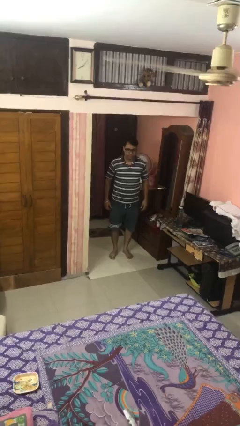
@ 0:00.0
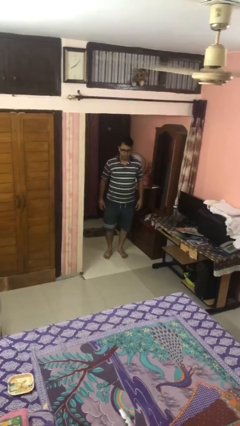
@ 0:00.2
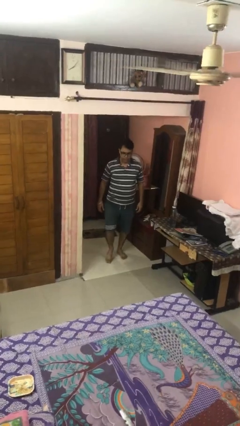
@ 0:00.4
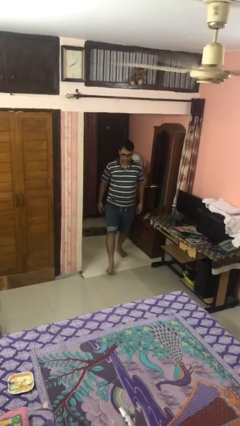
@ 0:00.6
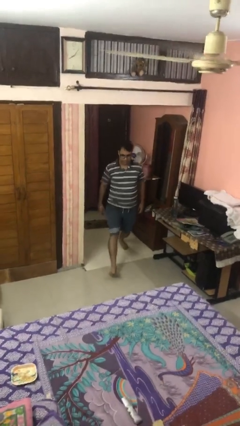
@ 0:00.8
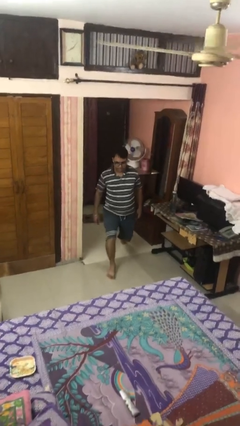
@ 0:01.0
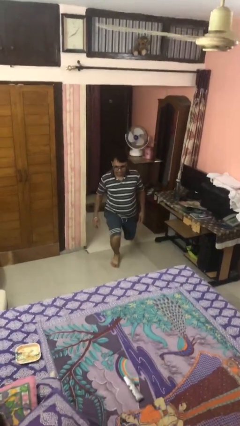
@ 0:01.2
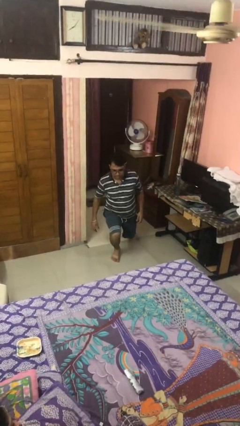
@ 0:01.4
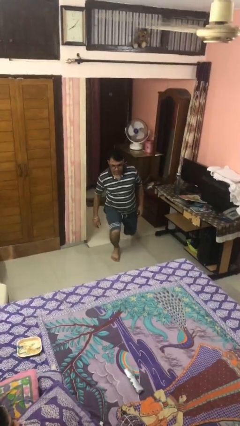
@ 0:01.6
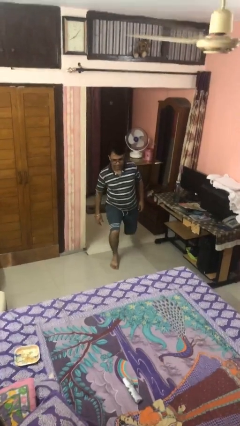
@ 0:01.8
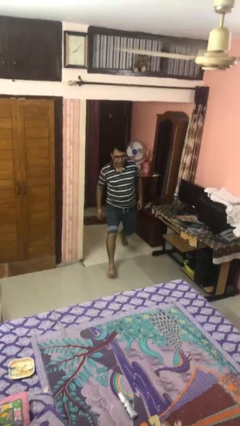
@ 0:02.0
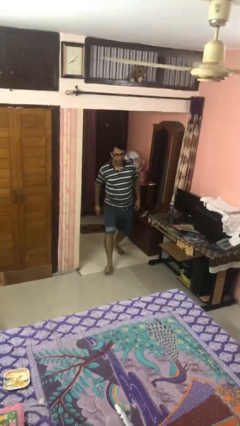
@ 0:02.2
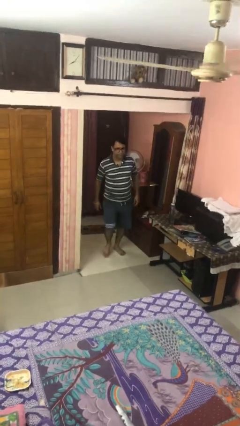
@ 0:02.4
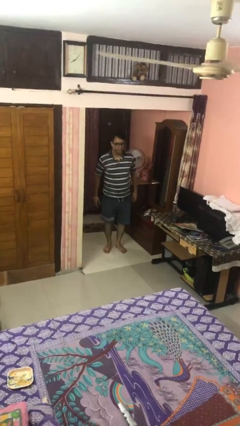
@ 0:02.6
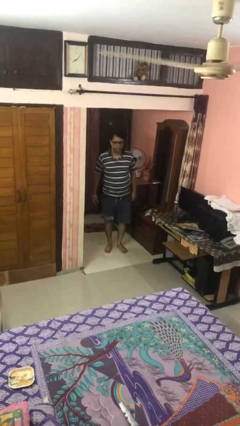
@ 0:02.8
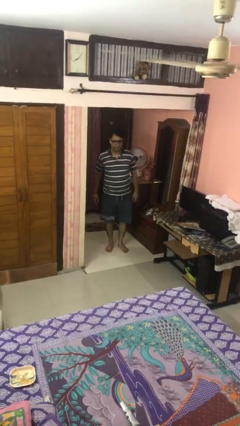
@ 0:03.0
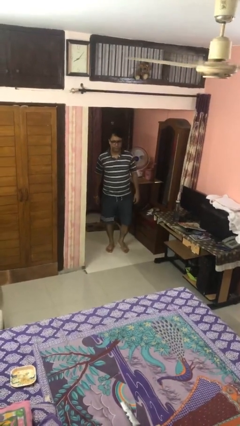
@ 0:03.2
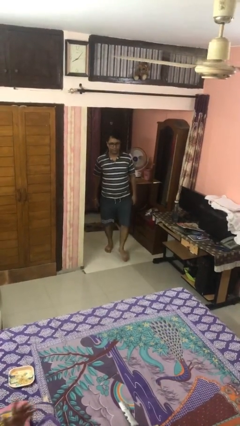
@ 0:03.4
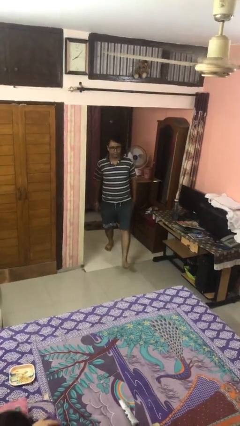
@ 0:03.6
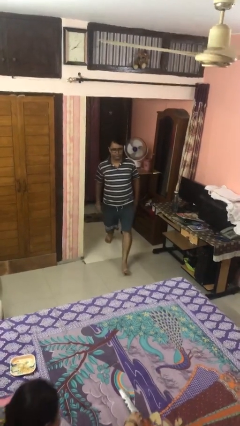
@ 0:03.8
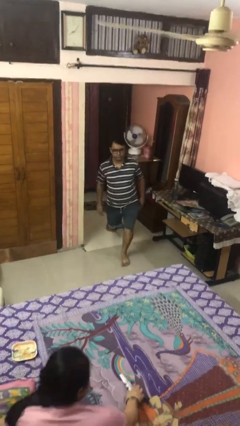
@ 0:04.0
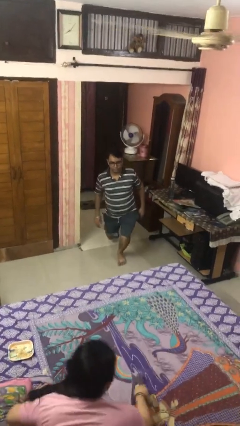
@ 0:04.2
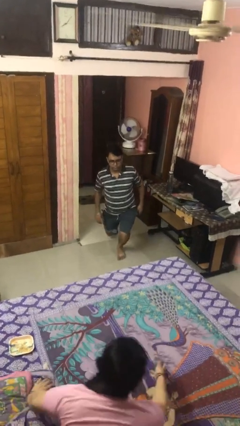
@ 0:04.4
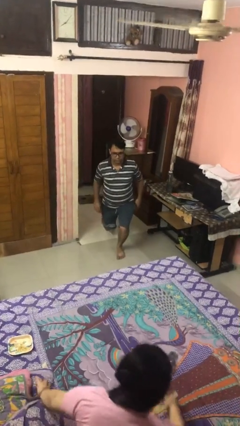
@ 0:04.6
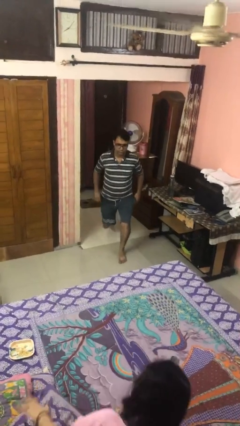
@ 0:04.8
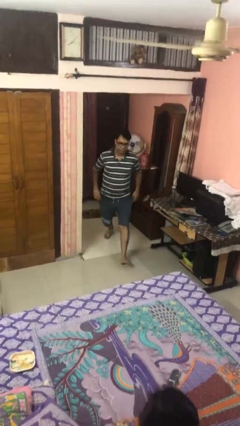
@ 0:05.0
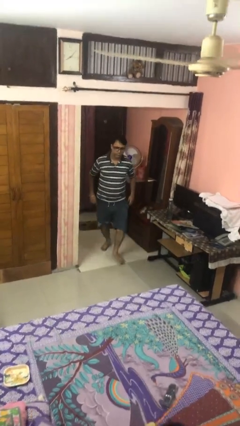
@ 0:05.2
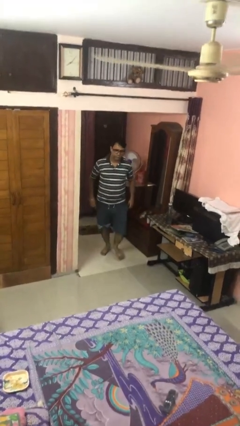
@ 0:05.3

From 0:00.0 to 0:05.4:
person exercises with lunges

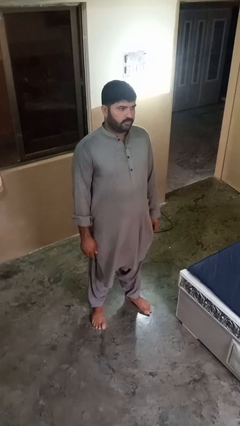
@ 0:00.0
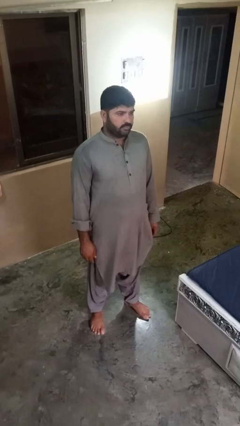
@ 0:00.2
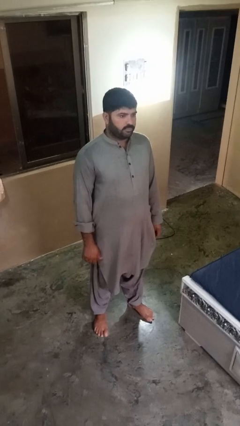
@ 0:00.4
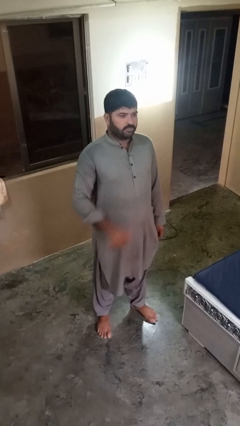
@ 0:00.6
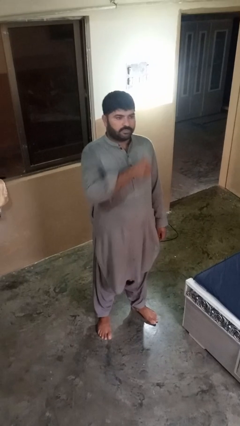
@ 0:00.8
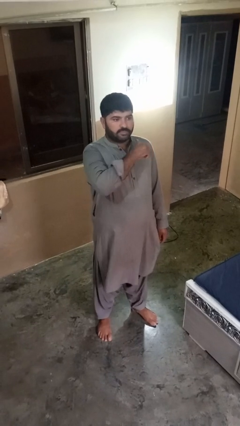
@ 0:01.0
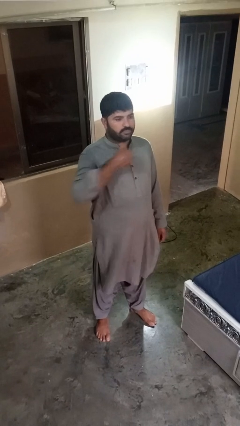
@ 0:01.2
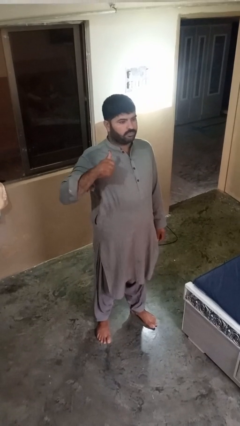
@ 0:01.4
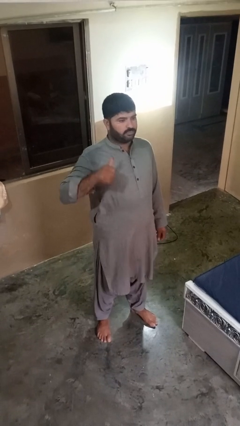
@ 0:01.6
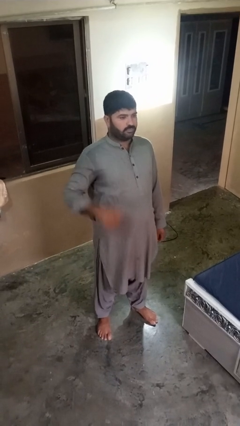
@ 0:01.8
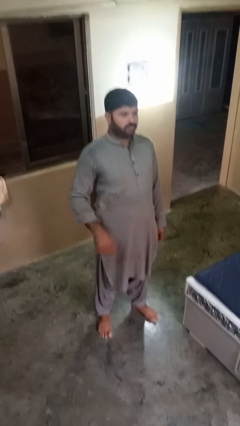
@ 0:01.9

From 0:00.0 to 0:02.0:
person gestures cut

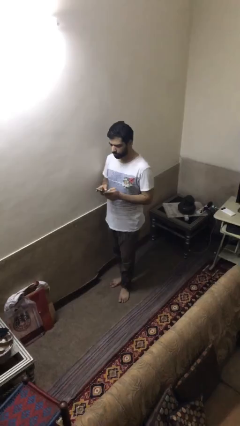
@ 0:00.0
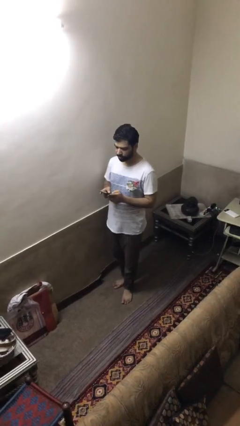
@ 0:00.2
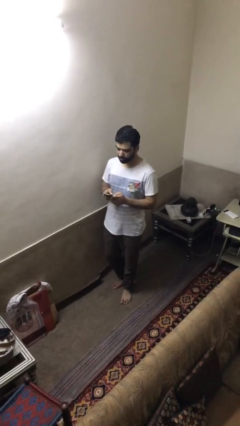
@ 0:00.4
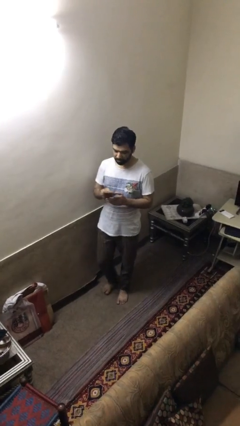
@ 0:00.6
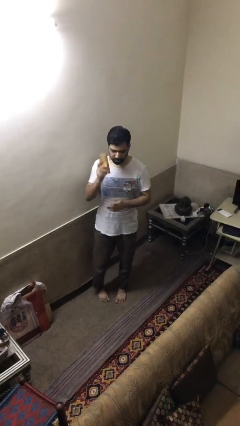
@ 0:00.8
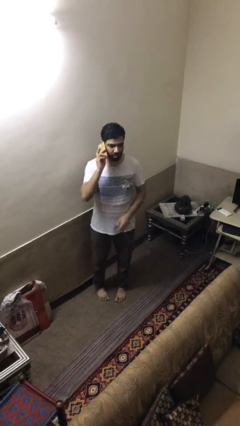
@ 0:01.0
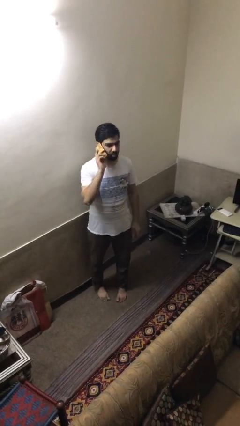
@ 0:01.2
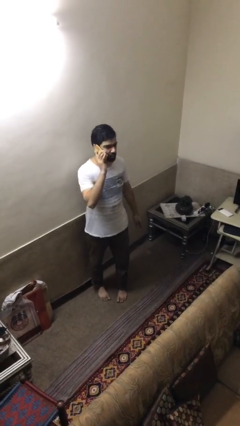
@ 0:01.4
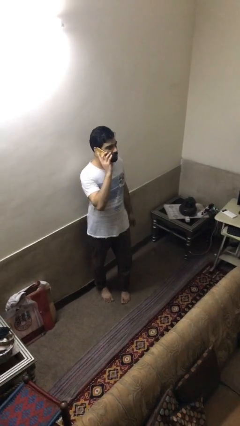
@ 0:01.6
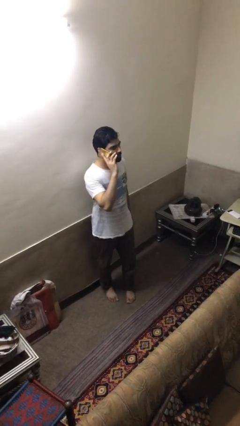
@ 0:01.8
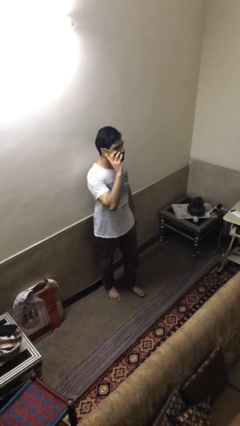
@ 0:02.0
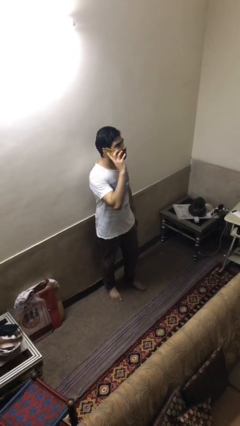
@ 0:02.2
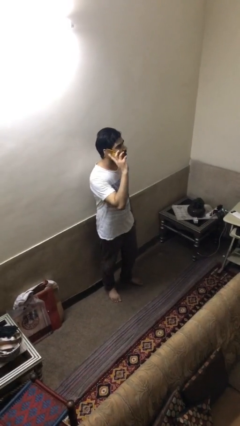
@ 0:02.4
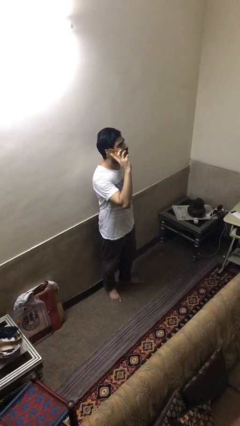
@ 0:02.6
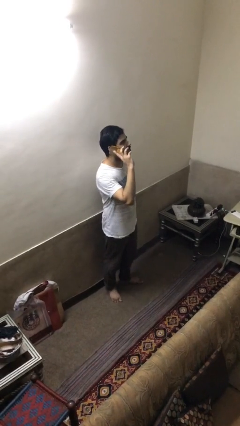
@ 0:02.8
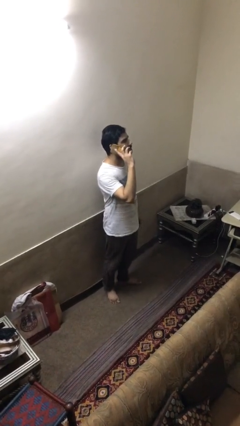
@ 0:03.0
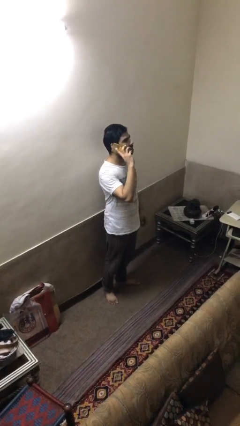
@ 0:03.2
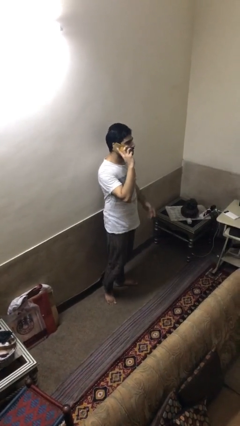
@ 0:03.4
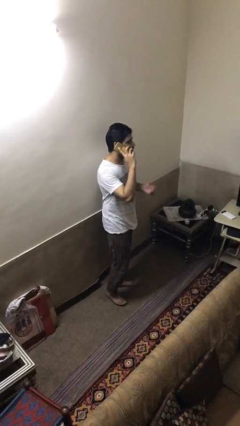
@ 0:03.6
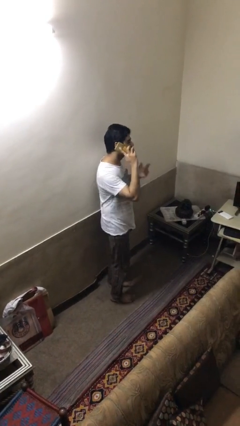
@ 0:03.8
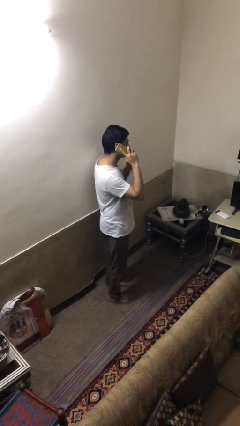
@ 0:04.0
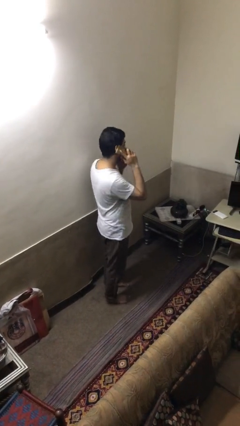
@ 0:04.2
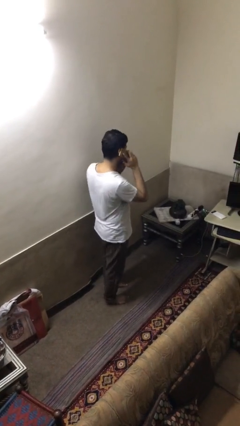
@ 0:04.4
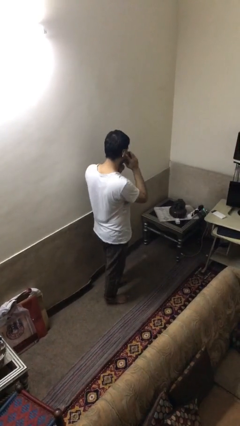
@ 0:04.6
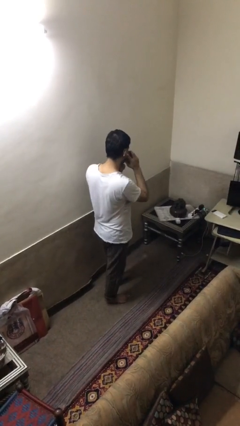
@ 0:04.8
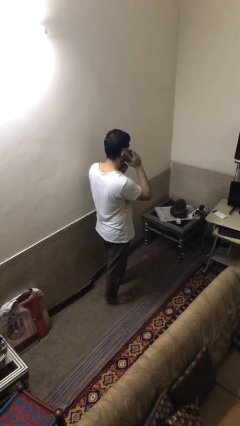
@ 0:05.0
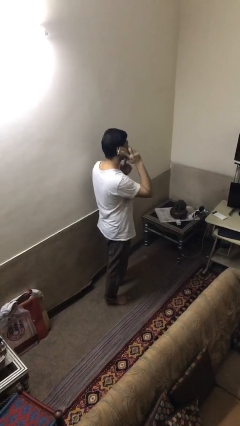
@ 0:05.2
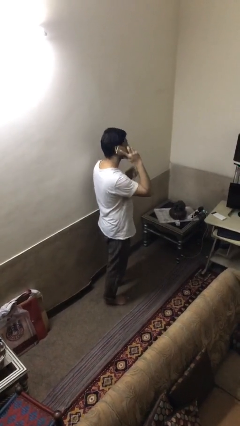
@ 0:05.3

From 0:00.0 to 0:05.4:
person talks on phone

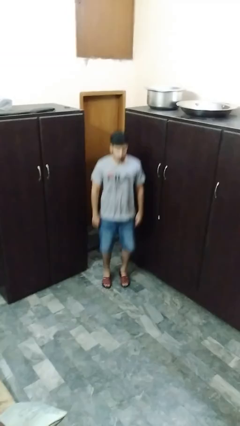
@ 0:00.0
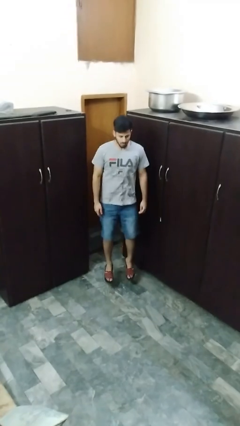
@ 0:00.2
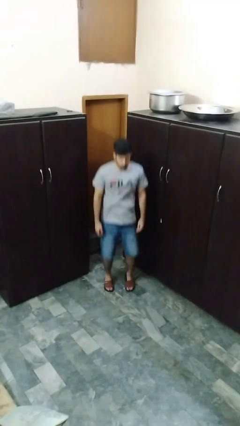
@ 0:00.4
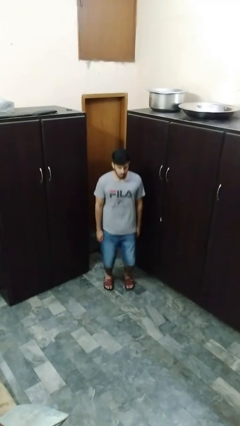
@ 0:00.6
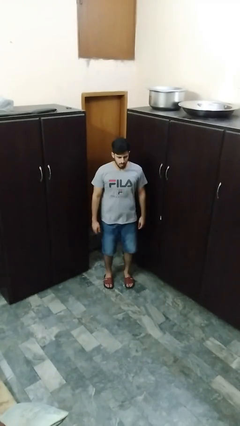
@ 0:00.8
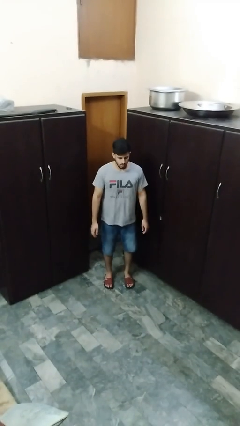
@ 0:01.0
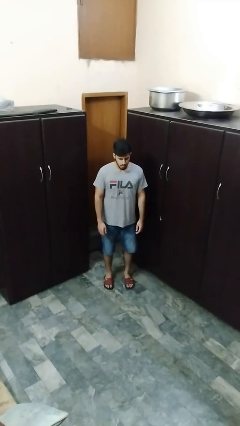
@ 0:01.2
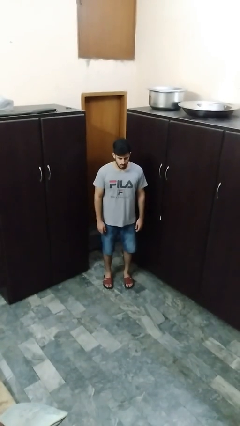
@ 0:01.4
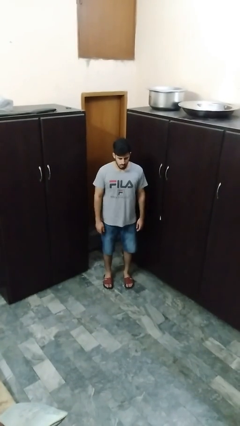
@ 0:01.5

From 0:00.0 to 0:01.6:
person jumps

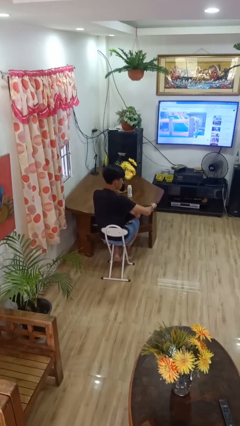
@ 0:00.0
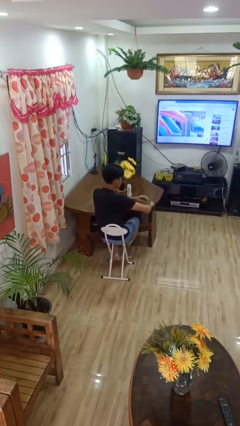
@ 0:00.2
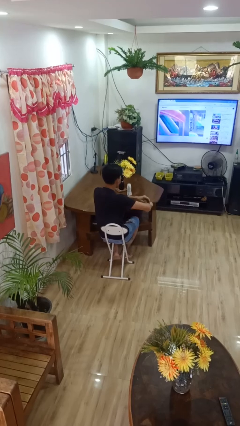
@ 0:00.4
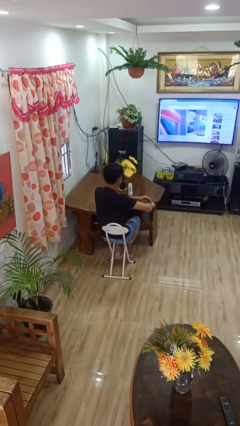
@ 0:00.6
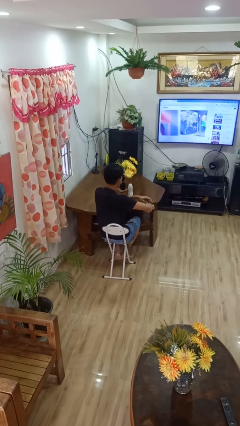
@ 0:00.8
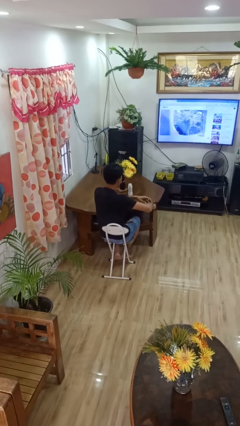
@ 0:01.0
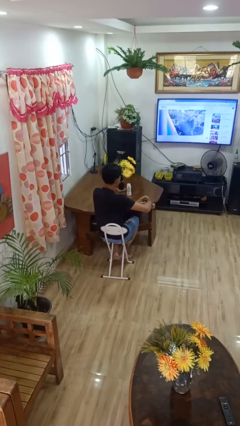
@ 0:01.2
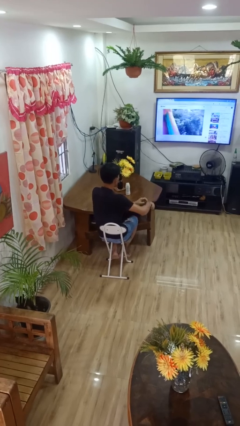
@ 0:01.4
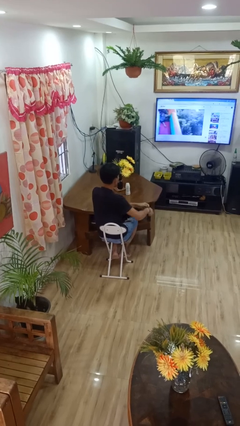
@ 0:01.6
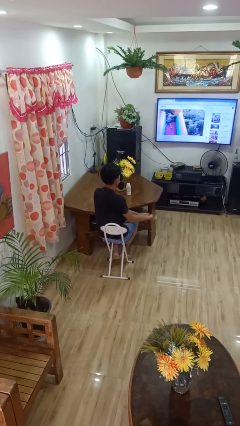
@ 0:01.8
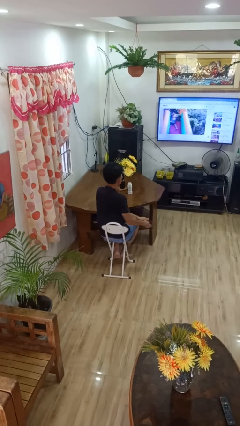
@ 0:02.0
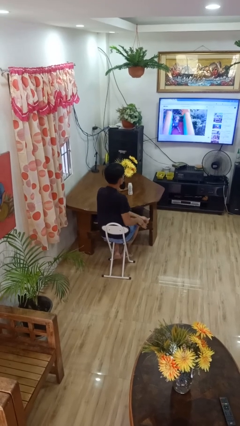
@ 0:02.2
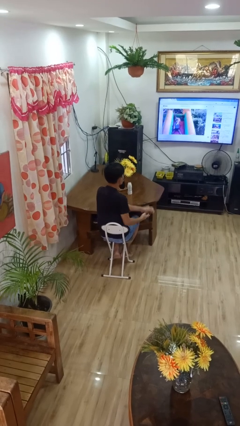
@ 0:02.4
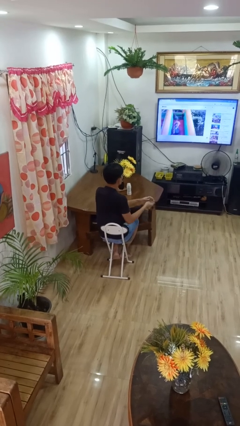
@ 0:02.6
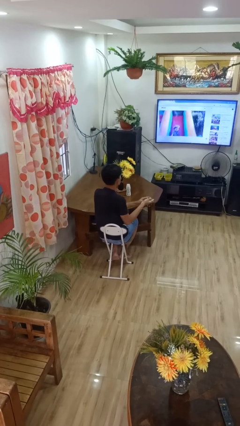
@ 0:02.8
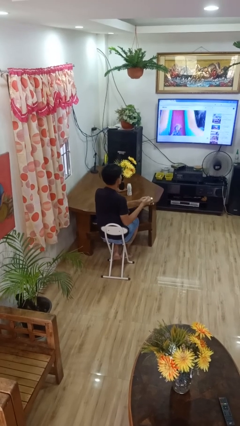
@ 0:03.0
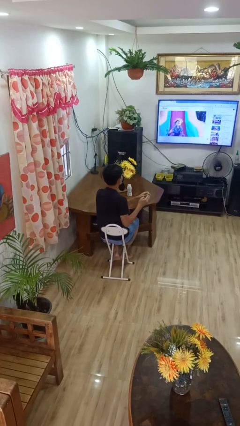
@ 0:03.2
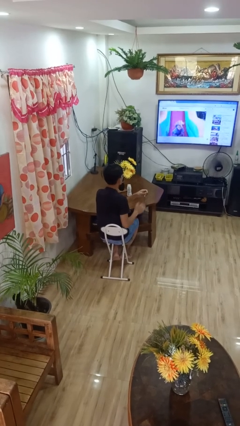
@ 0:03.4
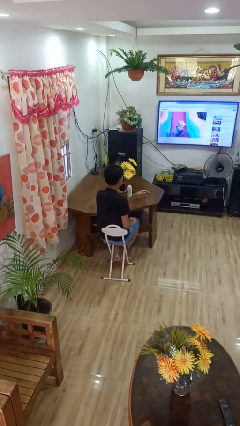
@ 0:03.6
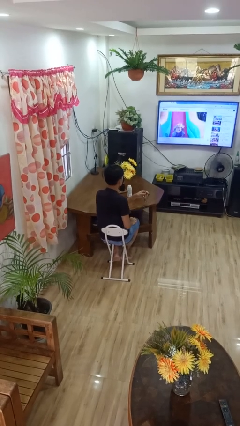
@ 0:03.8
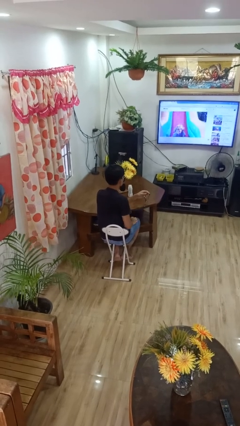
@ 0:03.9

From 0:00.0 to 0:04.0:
person takes off wristwatch
